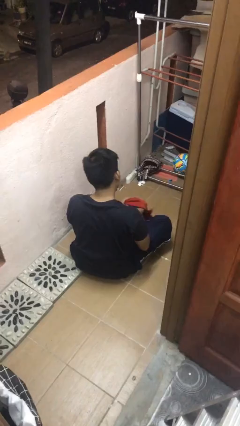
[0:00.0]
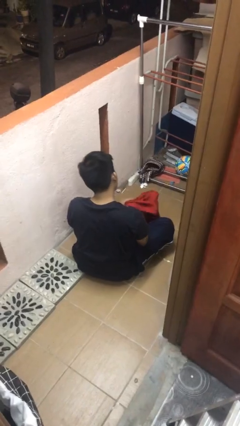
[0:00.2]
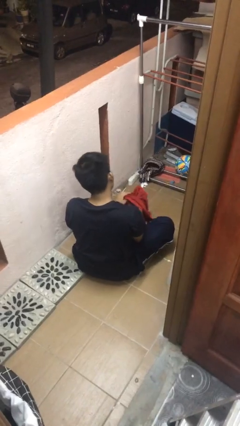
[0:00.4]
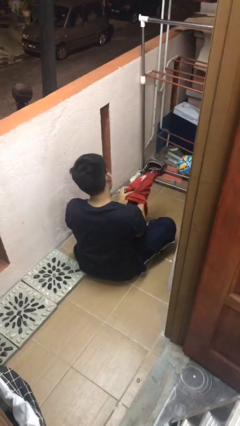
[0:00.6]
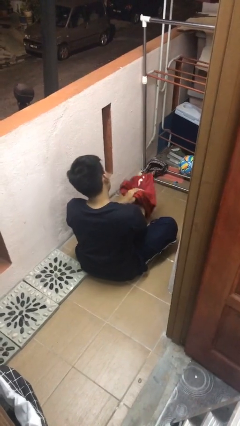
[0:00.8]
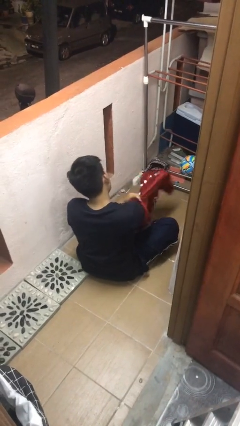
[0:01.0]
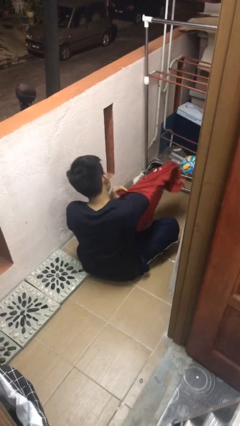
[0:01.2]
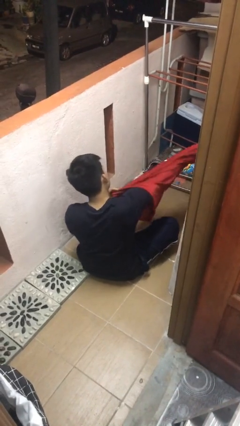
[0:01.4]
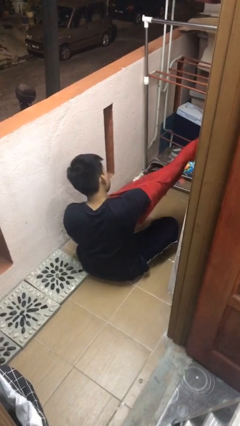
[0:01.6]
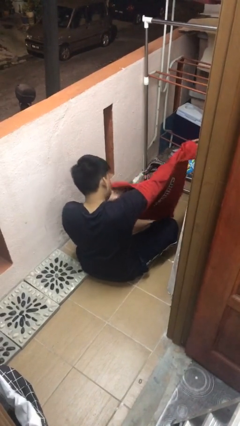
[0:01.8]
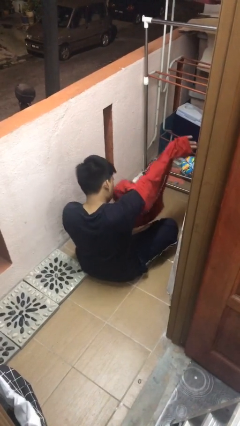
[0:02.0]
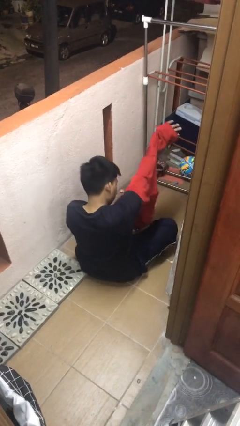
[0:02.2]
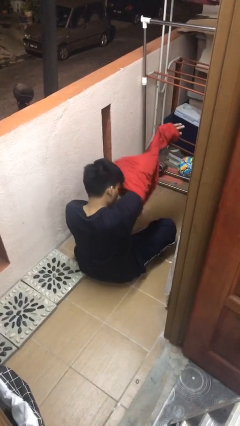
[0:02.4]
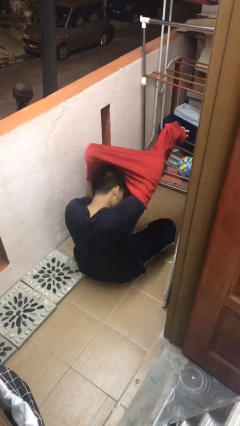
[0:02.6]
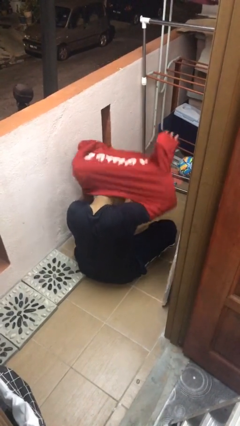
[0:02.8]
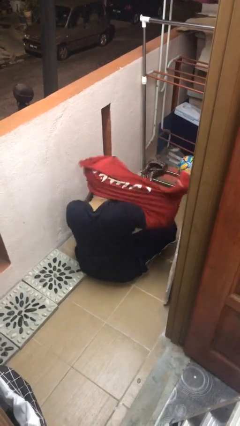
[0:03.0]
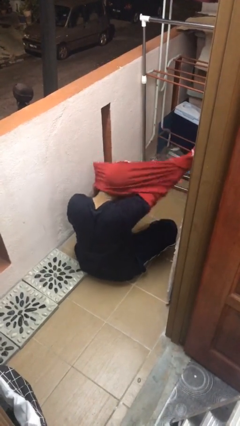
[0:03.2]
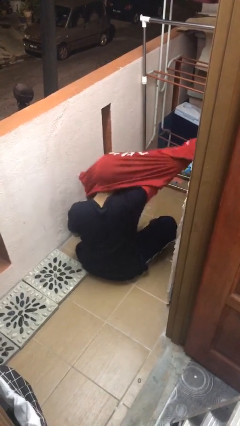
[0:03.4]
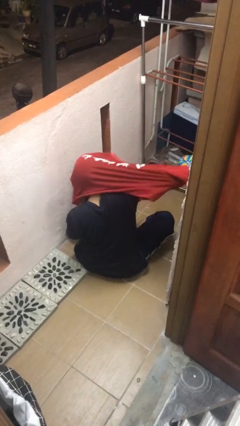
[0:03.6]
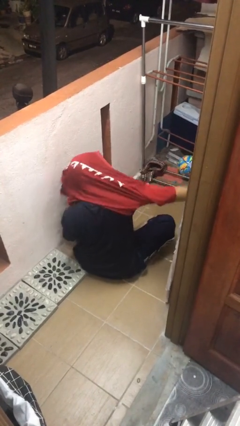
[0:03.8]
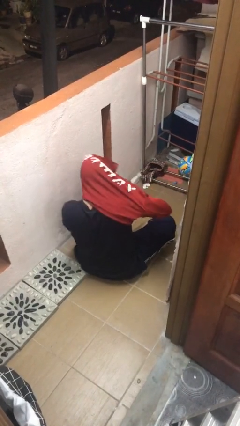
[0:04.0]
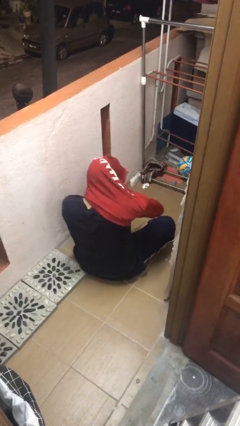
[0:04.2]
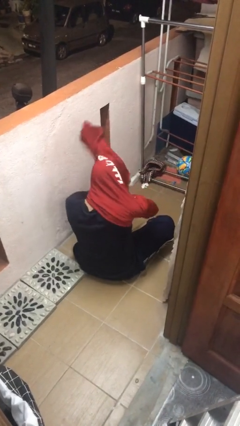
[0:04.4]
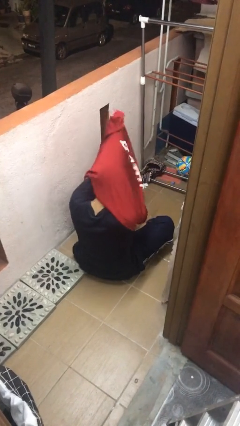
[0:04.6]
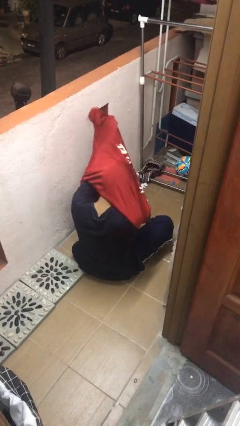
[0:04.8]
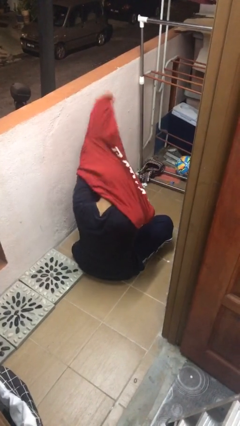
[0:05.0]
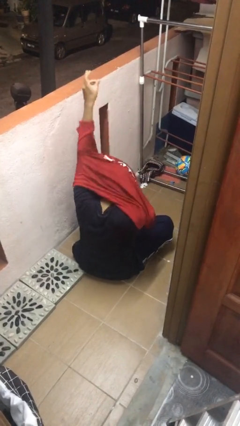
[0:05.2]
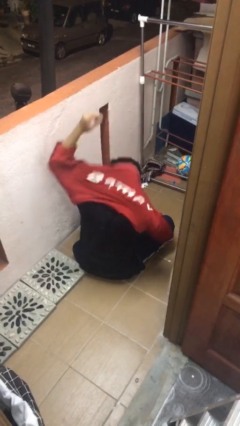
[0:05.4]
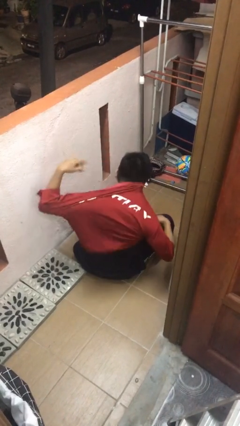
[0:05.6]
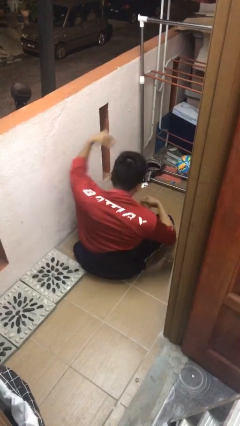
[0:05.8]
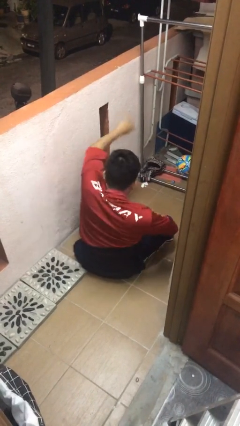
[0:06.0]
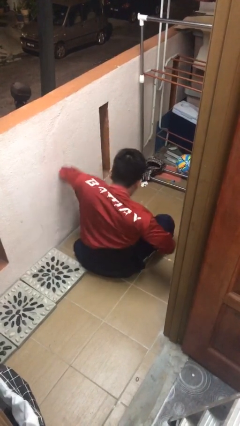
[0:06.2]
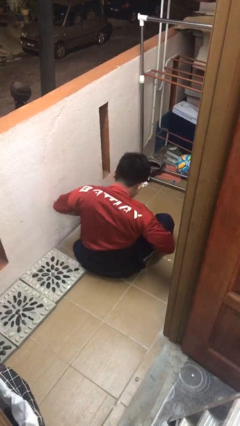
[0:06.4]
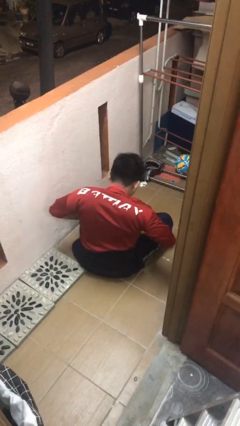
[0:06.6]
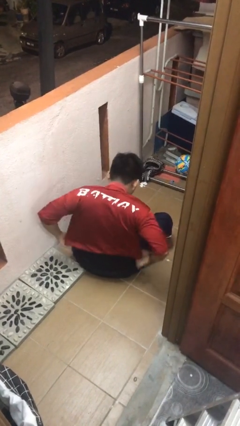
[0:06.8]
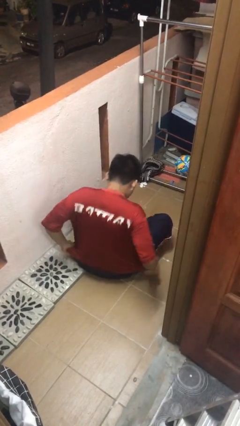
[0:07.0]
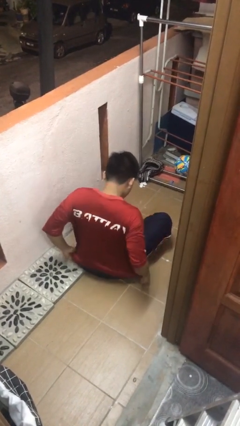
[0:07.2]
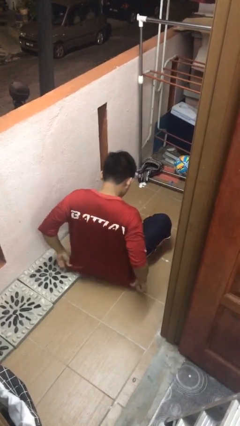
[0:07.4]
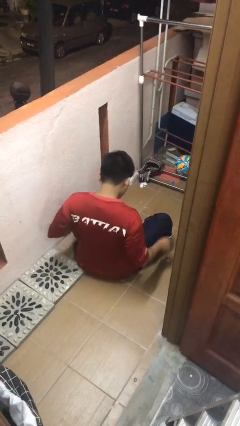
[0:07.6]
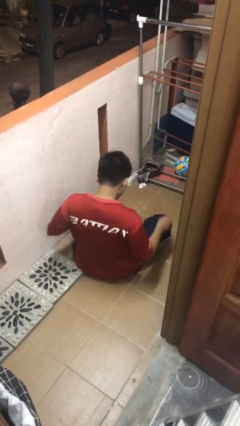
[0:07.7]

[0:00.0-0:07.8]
person puts on shirt

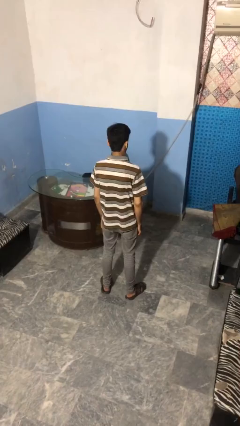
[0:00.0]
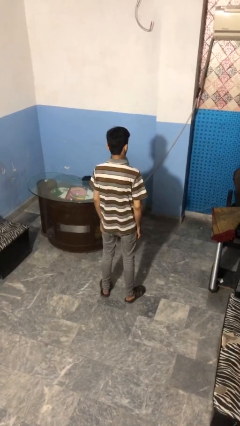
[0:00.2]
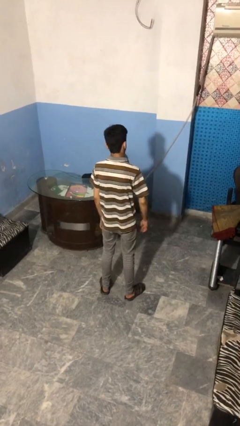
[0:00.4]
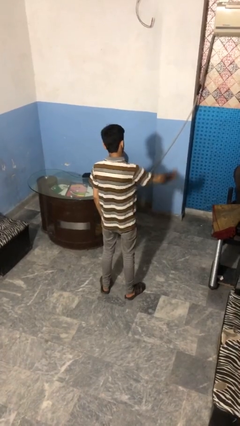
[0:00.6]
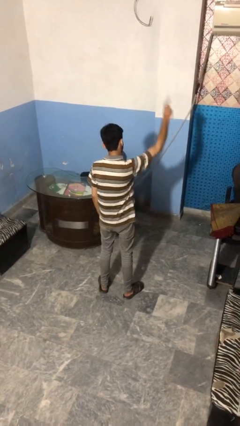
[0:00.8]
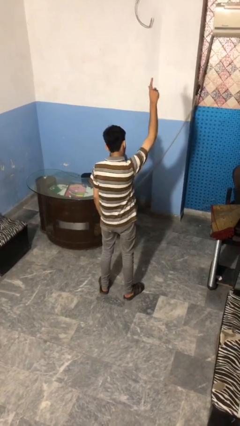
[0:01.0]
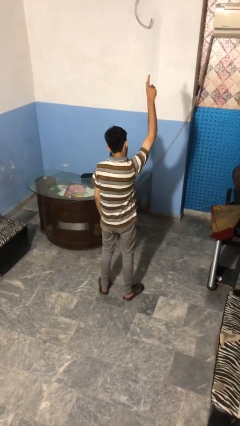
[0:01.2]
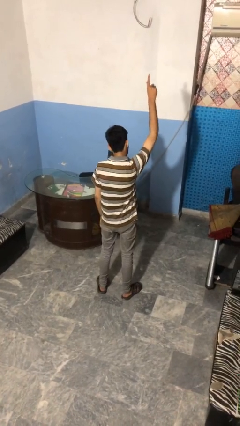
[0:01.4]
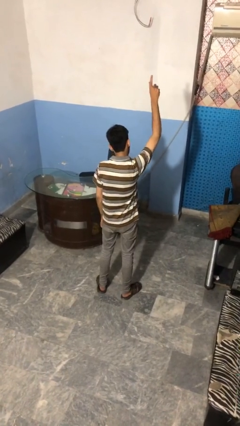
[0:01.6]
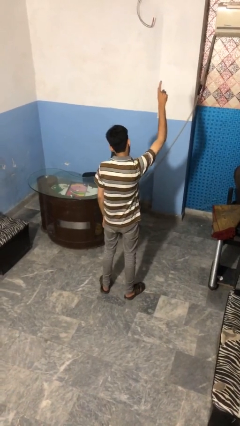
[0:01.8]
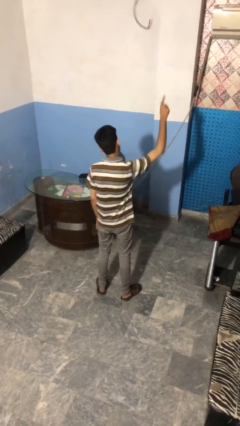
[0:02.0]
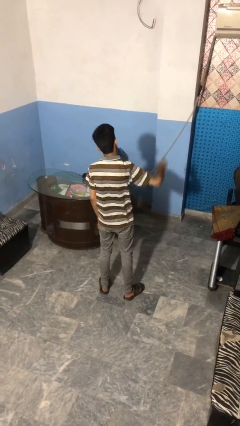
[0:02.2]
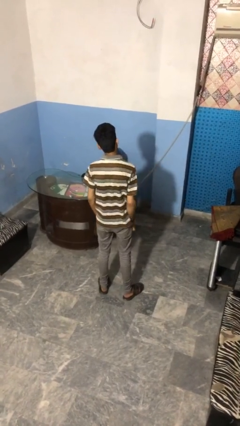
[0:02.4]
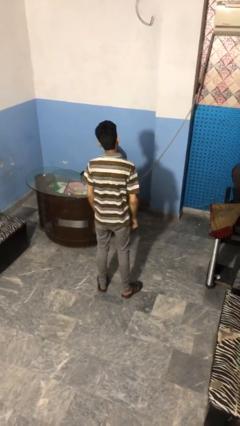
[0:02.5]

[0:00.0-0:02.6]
person gestures number one

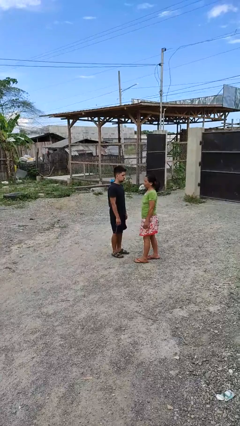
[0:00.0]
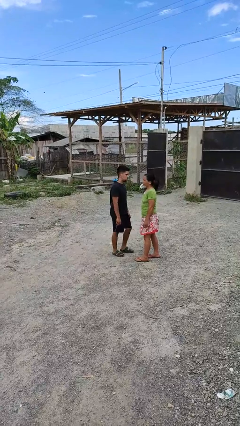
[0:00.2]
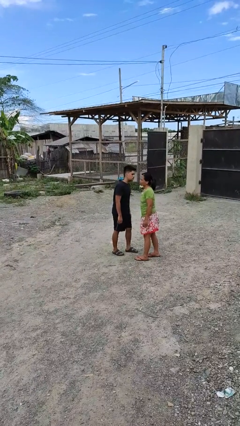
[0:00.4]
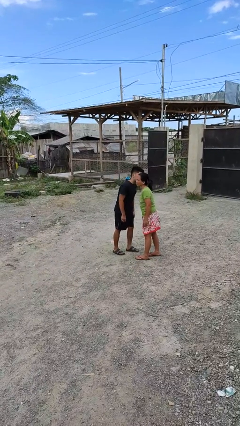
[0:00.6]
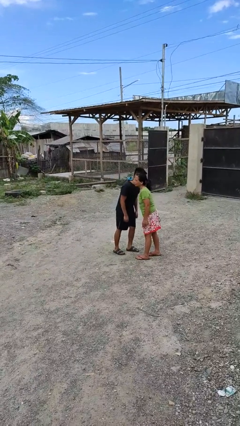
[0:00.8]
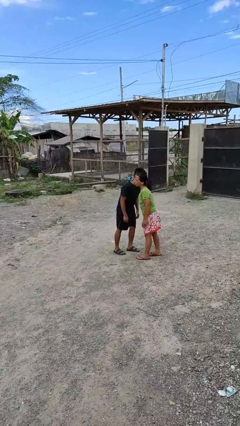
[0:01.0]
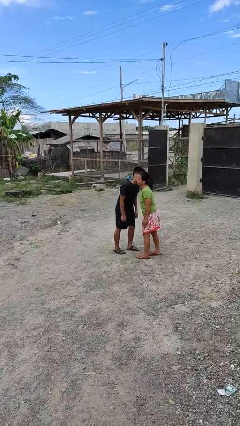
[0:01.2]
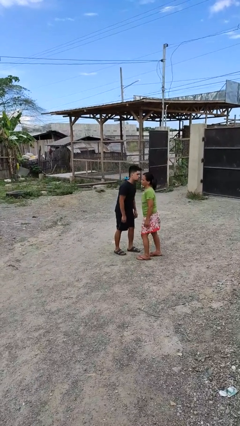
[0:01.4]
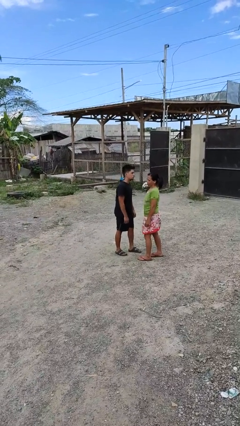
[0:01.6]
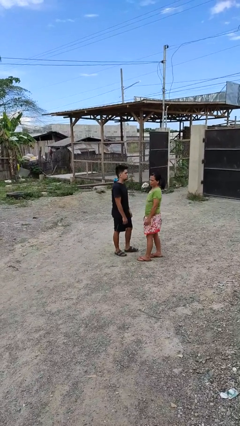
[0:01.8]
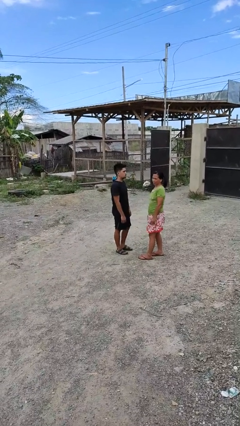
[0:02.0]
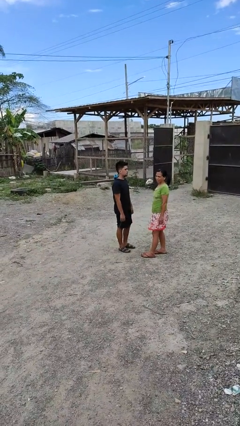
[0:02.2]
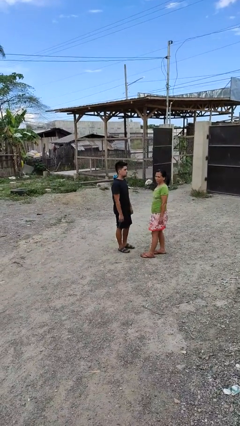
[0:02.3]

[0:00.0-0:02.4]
person kisses cheek of person

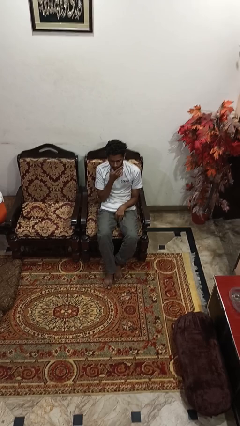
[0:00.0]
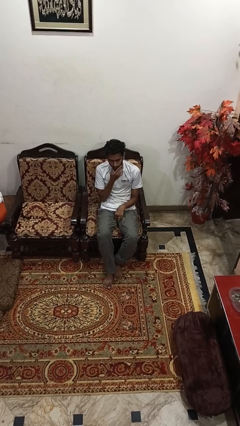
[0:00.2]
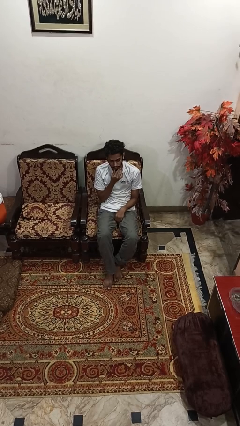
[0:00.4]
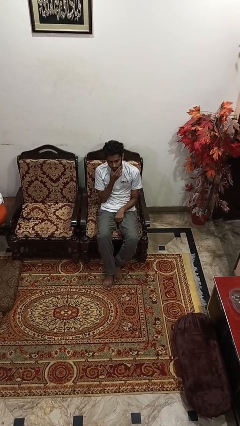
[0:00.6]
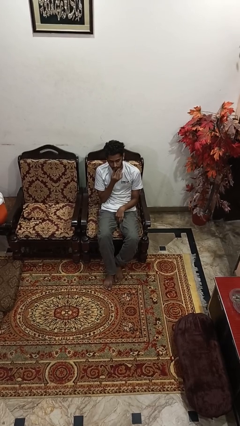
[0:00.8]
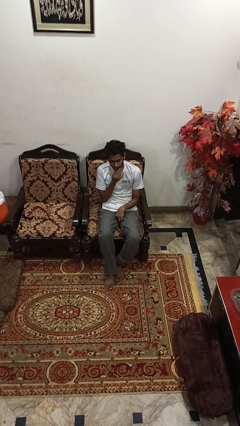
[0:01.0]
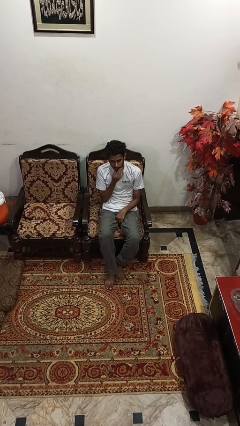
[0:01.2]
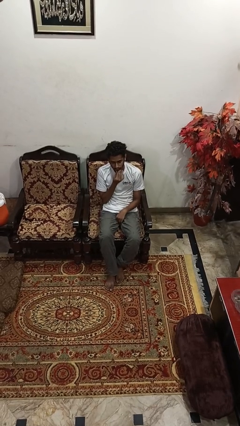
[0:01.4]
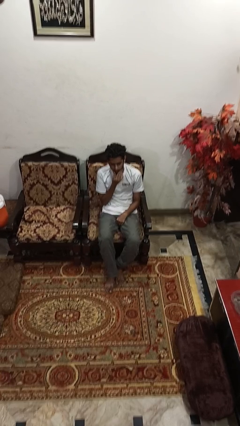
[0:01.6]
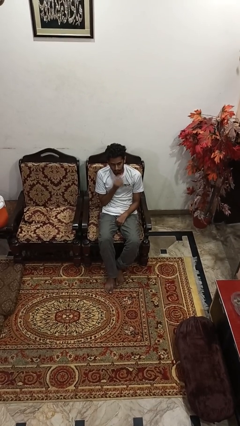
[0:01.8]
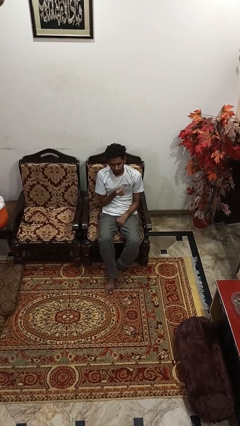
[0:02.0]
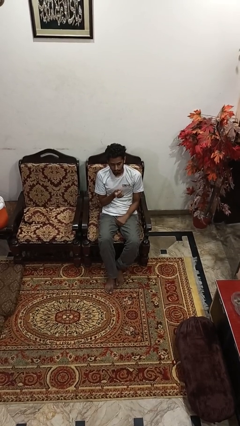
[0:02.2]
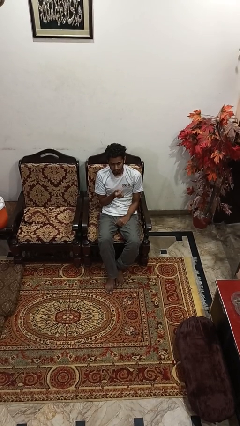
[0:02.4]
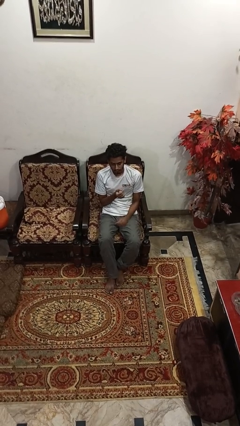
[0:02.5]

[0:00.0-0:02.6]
person strokes chin

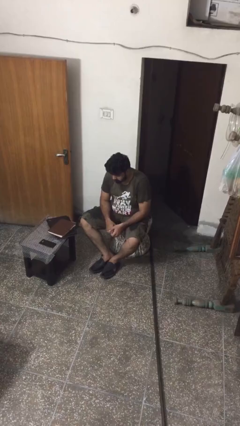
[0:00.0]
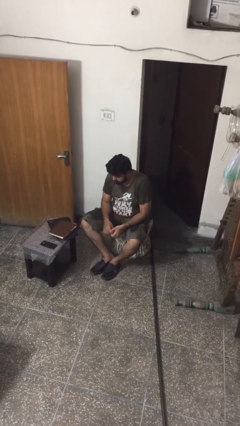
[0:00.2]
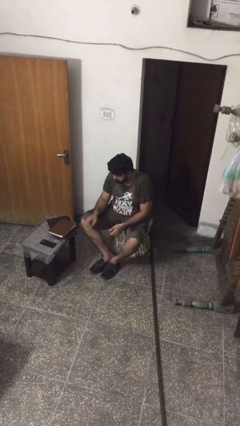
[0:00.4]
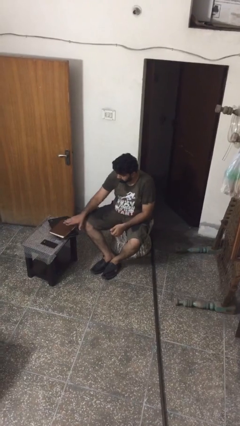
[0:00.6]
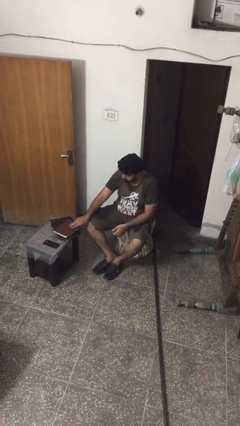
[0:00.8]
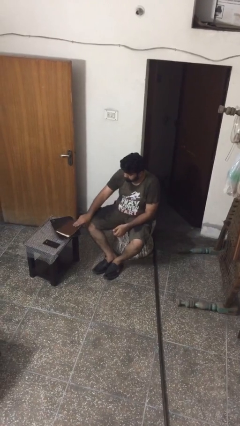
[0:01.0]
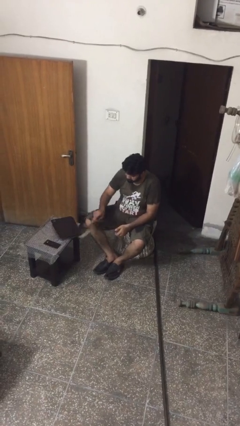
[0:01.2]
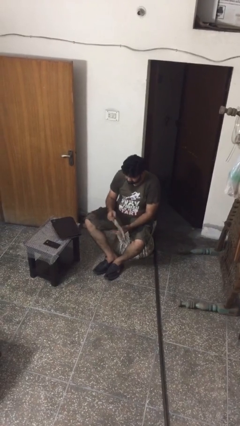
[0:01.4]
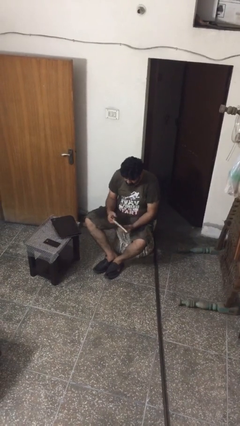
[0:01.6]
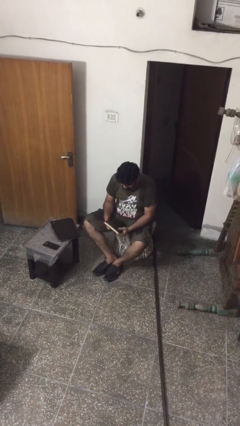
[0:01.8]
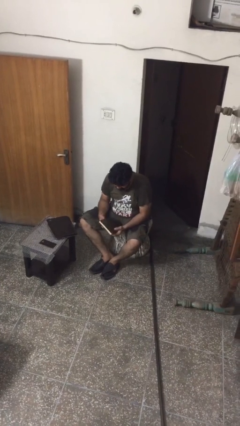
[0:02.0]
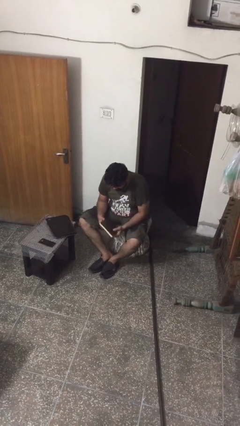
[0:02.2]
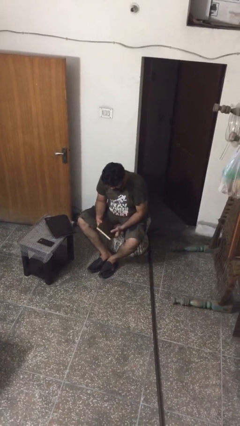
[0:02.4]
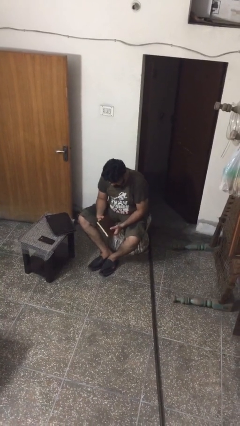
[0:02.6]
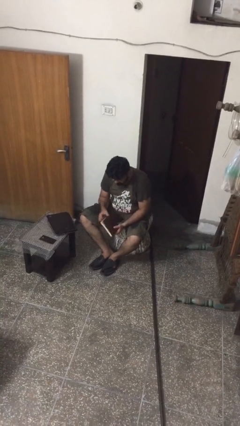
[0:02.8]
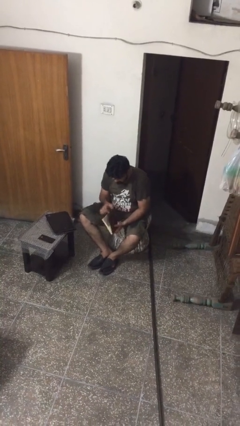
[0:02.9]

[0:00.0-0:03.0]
person picks up object from table
